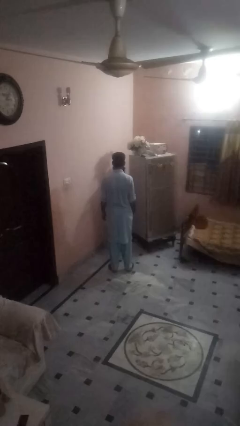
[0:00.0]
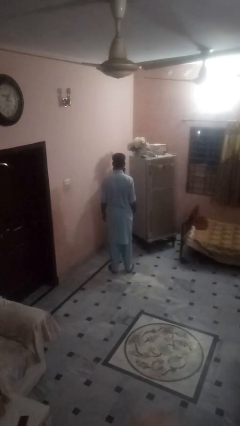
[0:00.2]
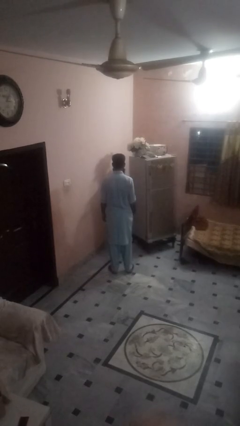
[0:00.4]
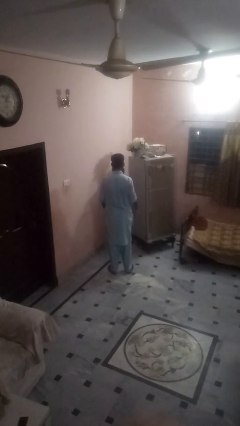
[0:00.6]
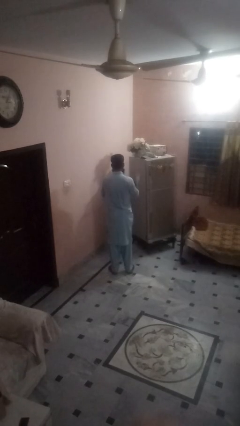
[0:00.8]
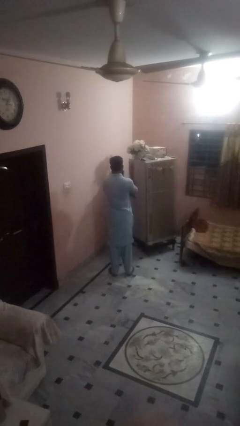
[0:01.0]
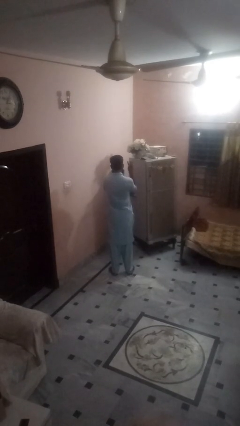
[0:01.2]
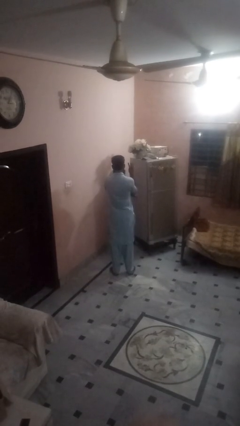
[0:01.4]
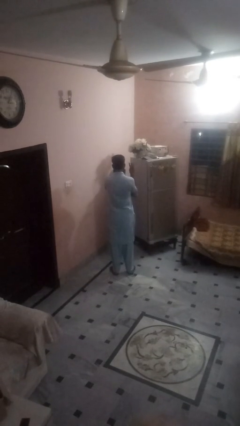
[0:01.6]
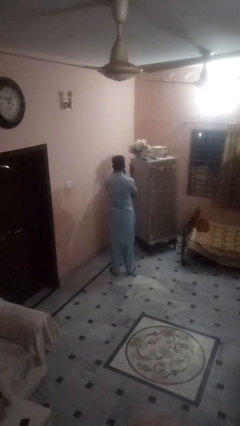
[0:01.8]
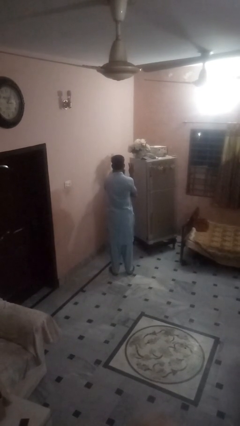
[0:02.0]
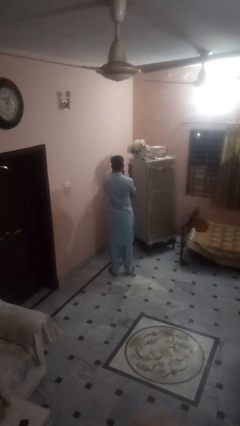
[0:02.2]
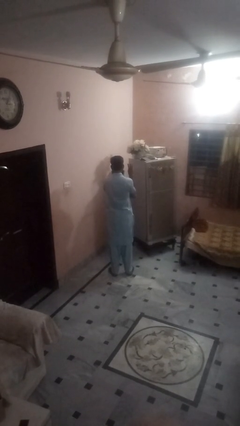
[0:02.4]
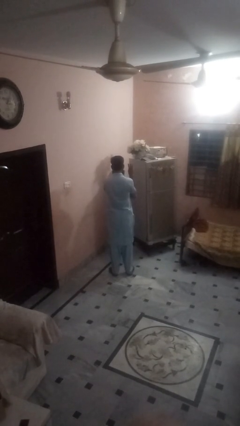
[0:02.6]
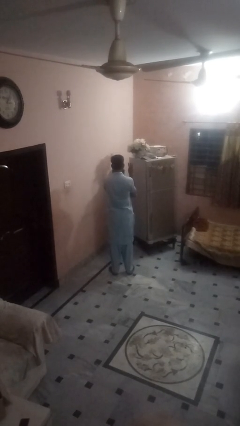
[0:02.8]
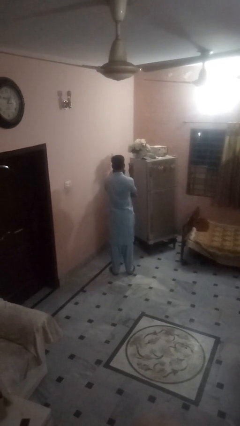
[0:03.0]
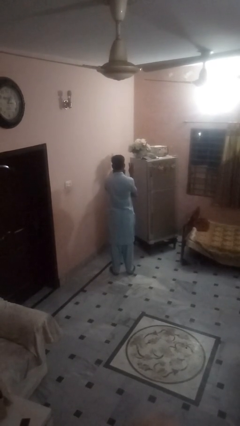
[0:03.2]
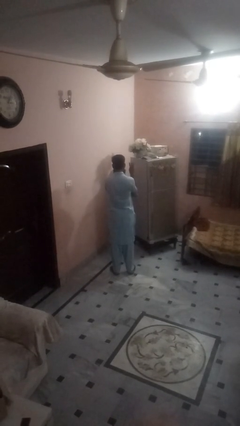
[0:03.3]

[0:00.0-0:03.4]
person gestures number three

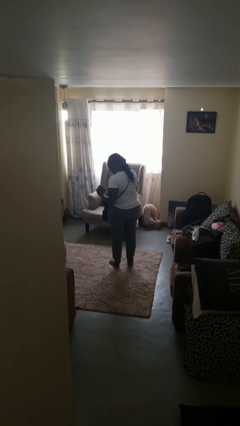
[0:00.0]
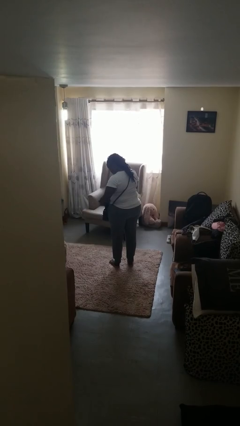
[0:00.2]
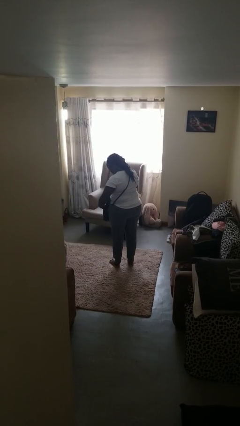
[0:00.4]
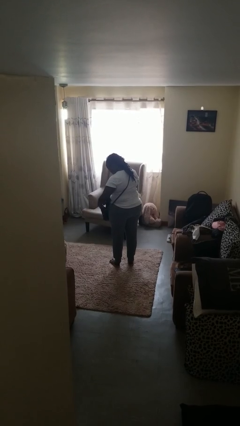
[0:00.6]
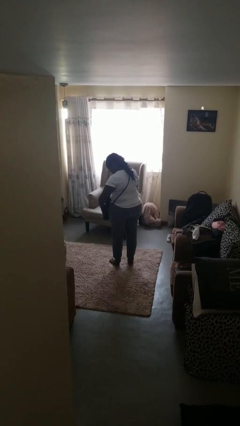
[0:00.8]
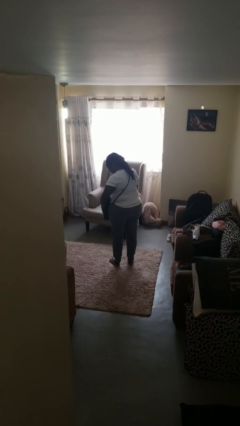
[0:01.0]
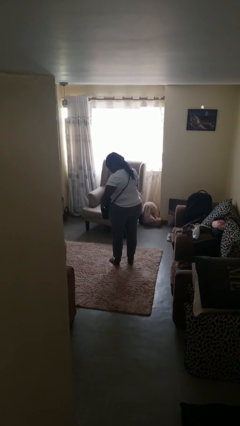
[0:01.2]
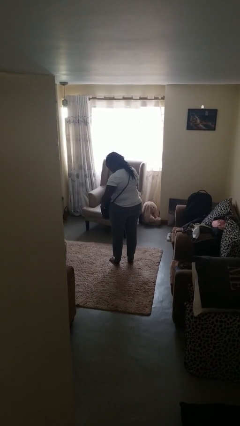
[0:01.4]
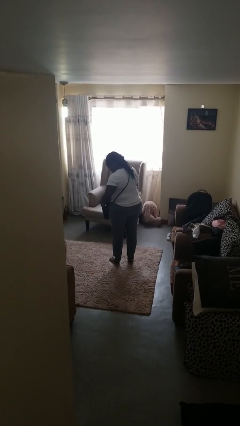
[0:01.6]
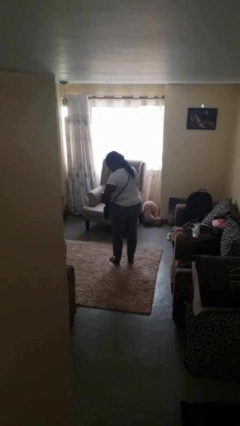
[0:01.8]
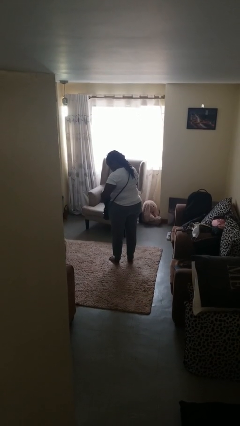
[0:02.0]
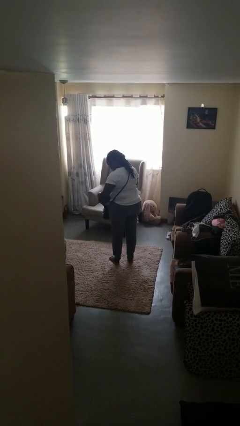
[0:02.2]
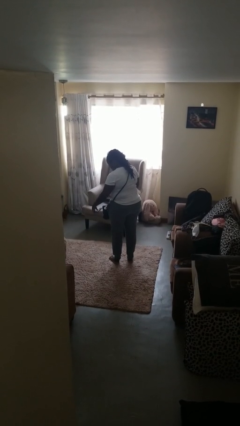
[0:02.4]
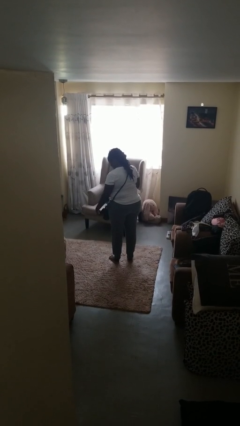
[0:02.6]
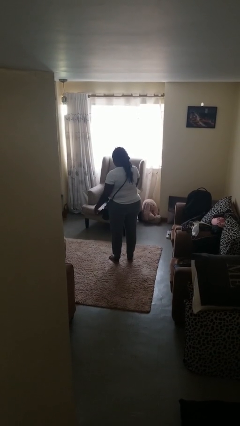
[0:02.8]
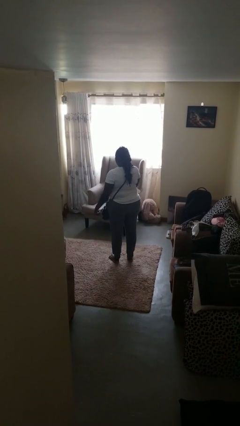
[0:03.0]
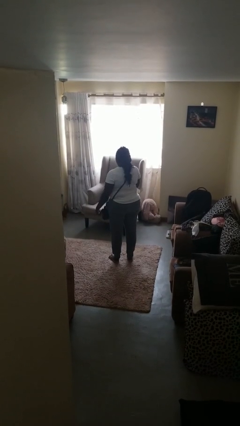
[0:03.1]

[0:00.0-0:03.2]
person puts object into purse

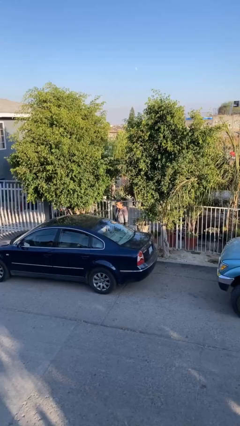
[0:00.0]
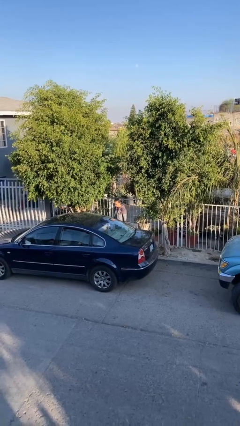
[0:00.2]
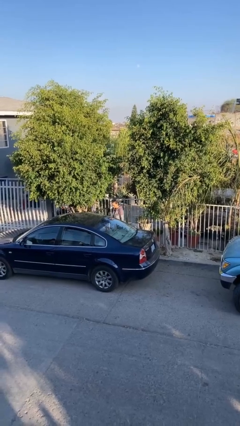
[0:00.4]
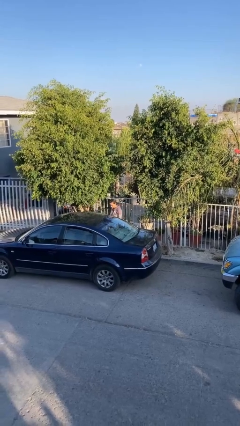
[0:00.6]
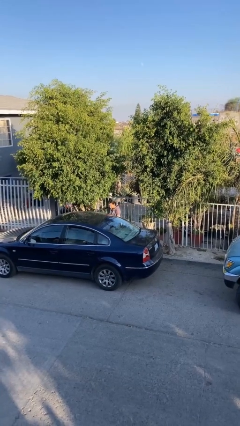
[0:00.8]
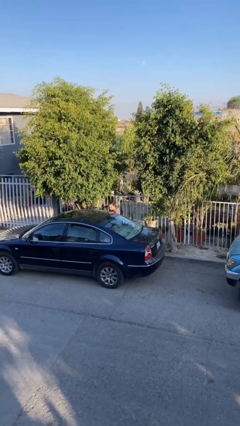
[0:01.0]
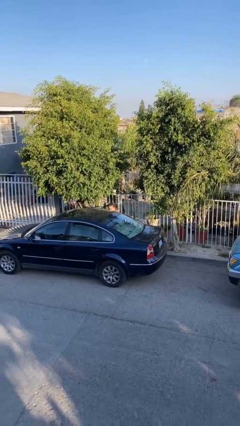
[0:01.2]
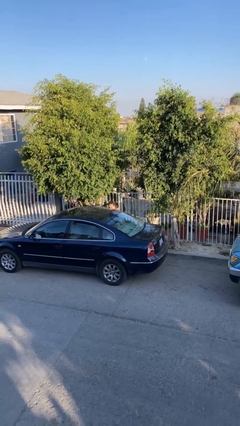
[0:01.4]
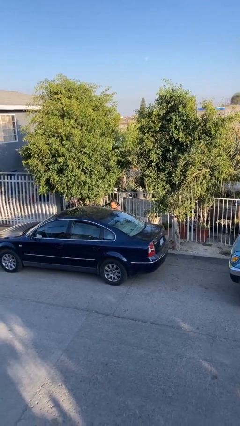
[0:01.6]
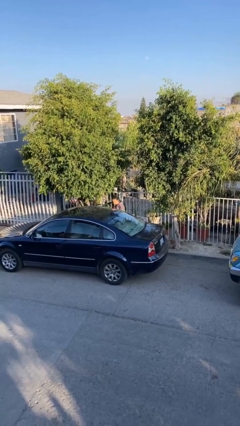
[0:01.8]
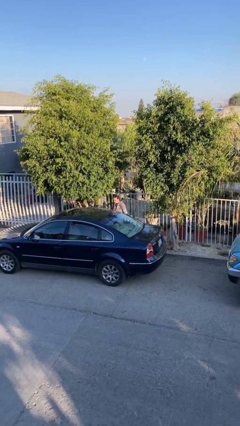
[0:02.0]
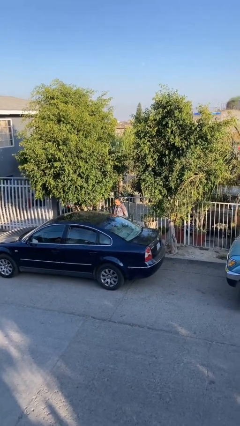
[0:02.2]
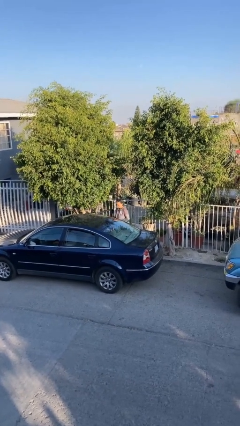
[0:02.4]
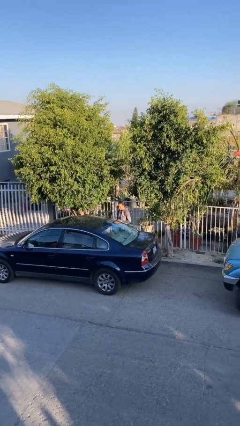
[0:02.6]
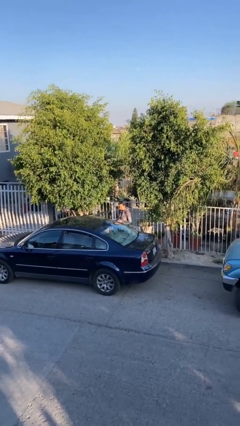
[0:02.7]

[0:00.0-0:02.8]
person unloads car

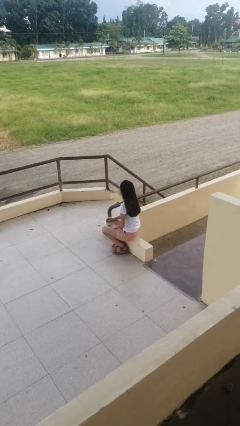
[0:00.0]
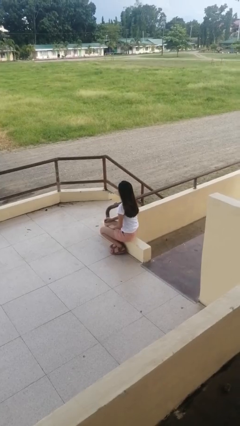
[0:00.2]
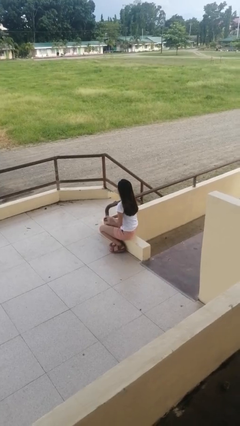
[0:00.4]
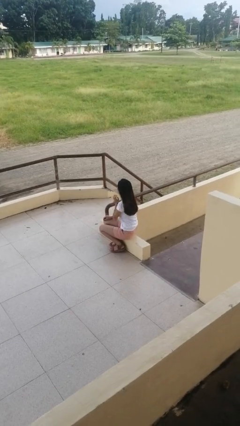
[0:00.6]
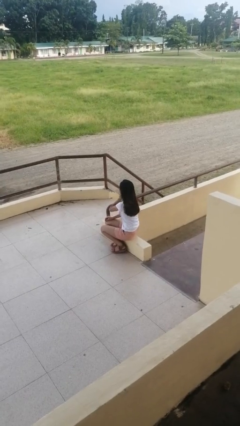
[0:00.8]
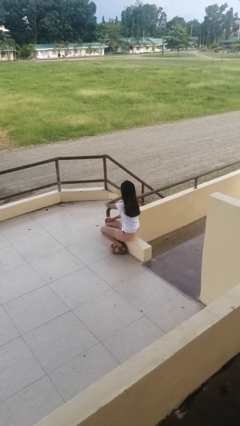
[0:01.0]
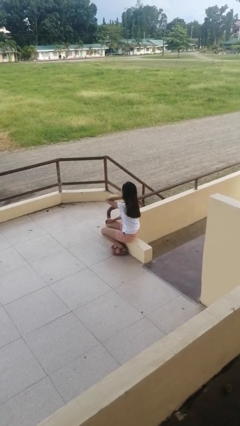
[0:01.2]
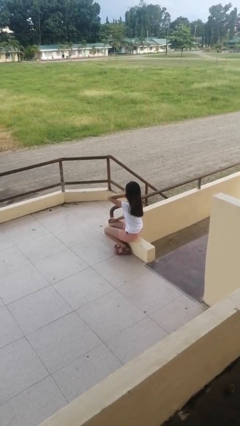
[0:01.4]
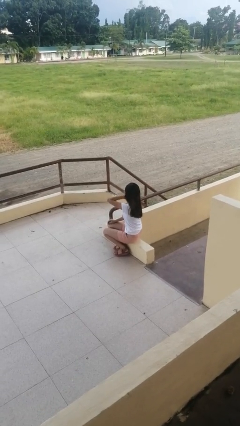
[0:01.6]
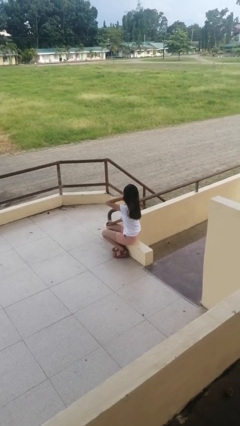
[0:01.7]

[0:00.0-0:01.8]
person rubs neck

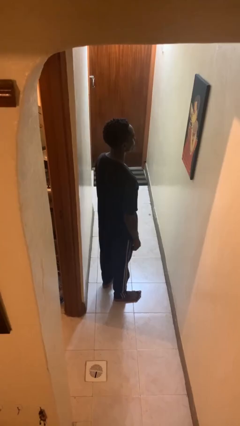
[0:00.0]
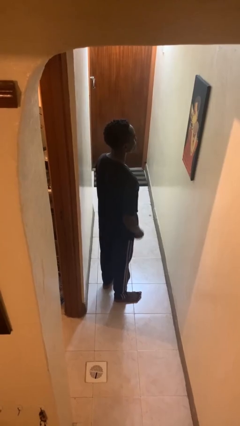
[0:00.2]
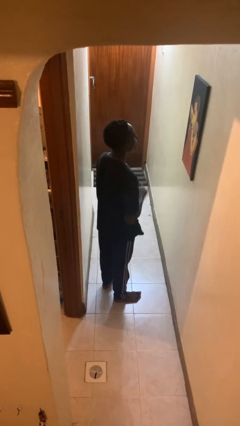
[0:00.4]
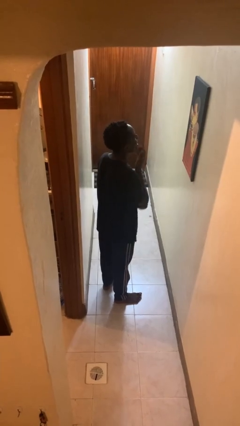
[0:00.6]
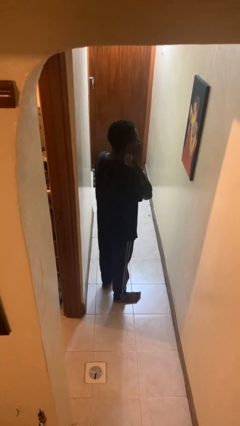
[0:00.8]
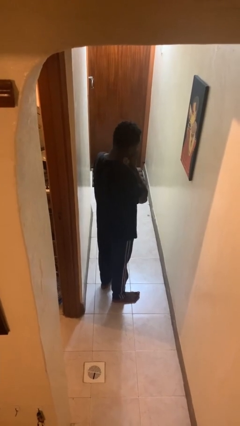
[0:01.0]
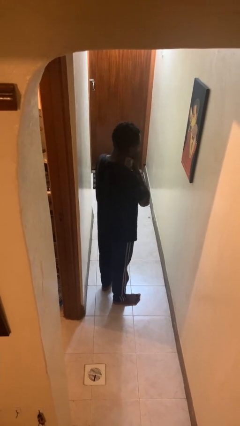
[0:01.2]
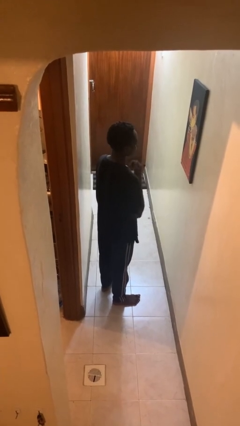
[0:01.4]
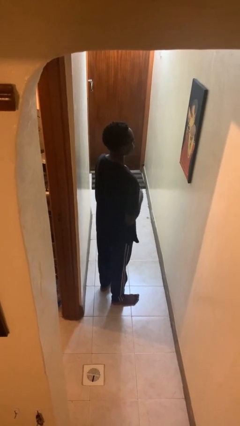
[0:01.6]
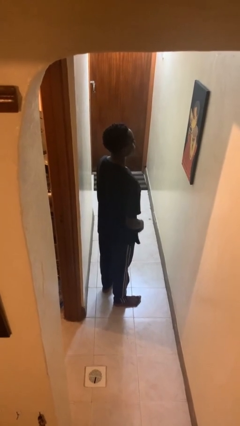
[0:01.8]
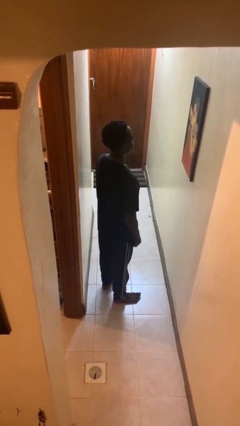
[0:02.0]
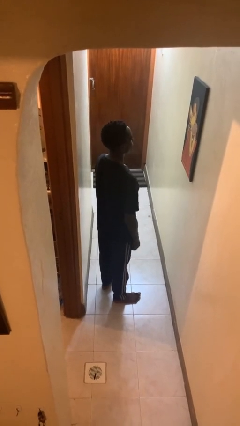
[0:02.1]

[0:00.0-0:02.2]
person sneezes into hand

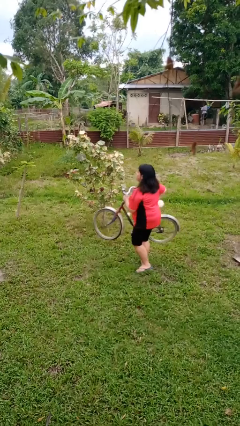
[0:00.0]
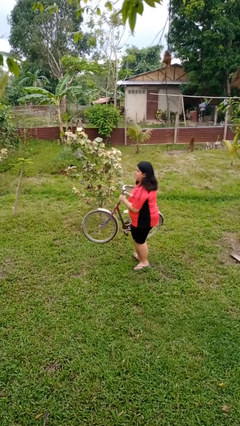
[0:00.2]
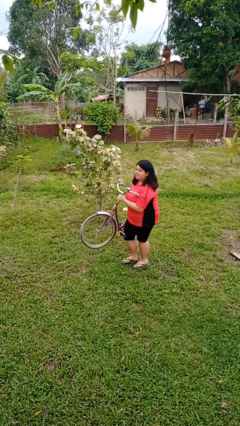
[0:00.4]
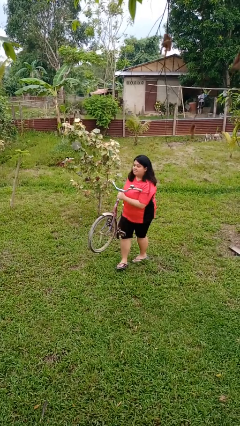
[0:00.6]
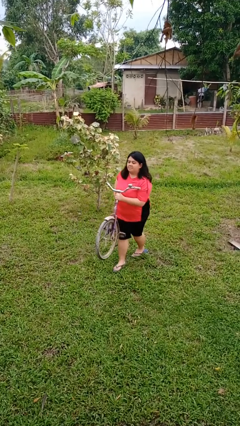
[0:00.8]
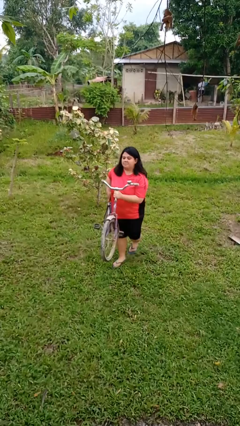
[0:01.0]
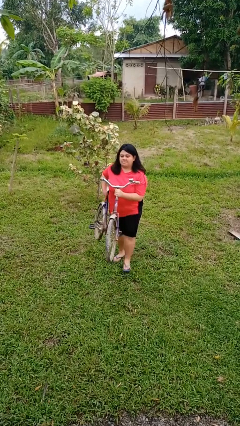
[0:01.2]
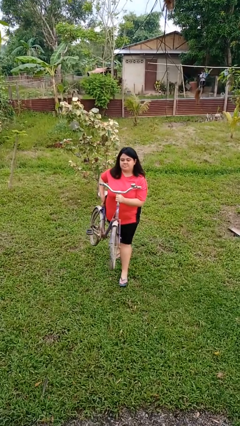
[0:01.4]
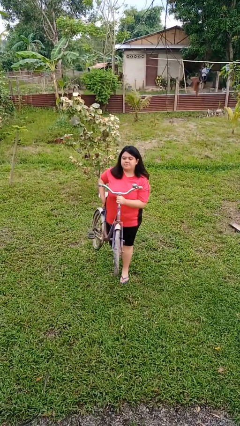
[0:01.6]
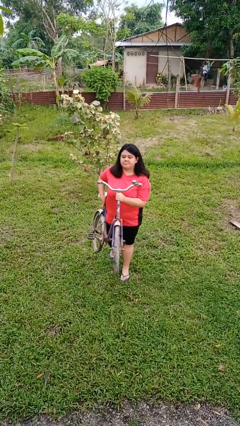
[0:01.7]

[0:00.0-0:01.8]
person carries bicycle

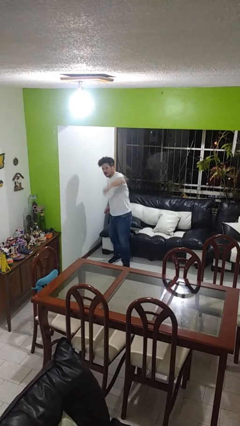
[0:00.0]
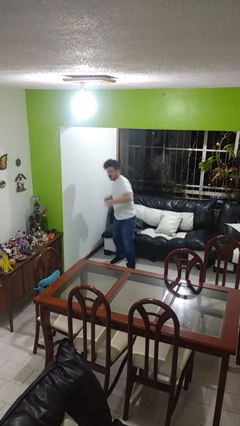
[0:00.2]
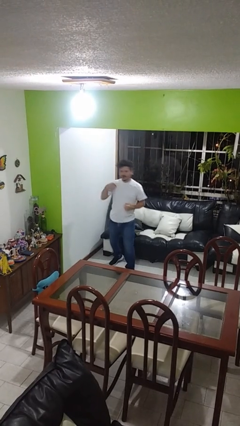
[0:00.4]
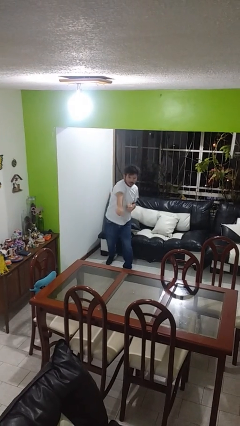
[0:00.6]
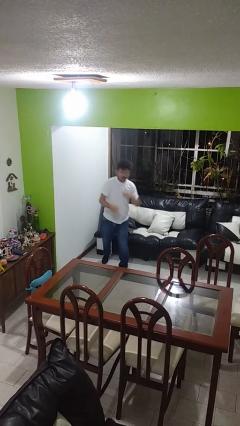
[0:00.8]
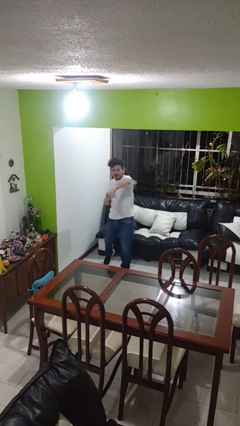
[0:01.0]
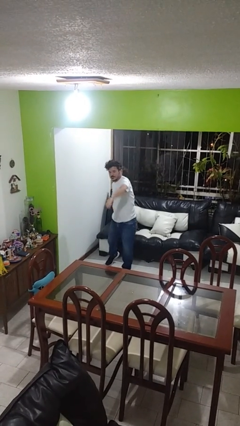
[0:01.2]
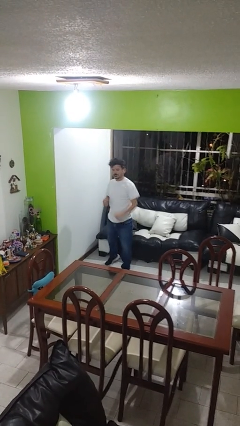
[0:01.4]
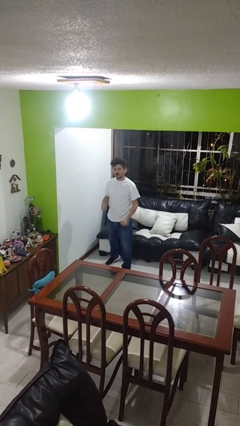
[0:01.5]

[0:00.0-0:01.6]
person punches

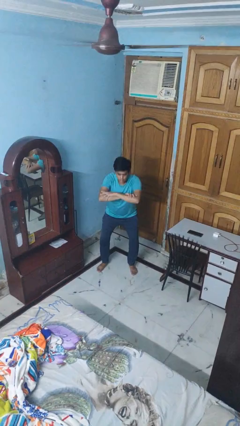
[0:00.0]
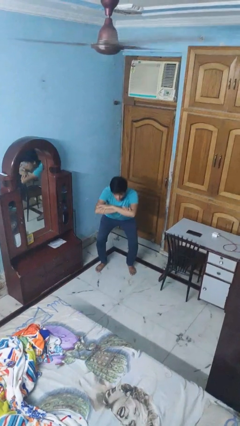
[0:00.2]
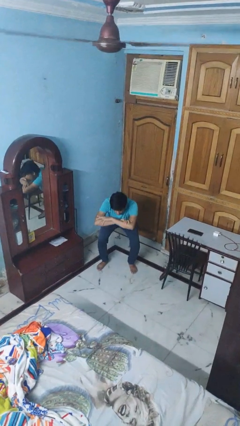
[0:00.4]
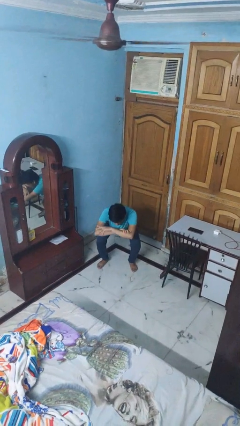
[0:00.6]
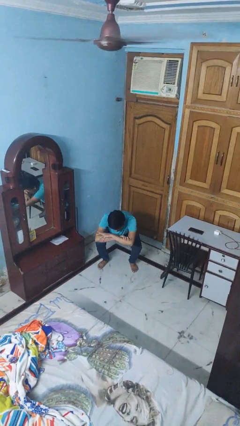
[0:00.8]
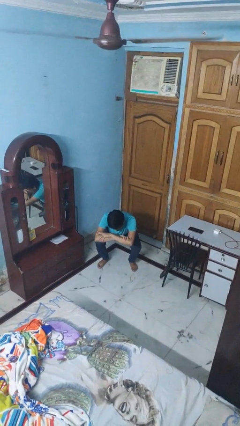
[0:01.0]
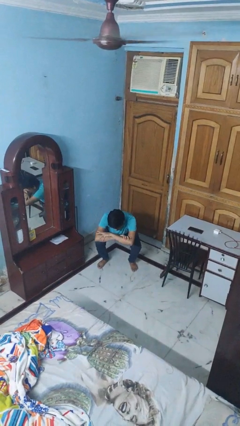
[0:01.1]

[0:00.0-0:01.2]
person squats
